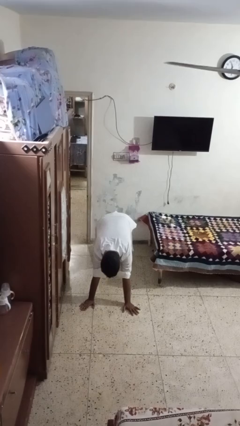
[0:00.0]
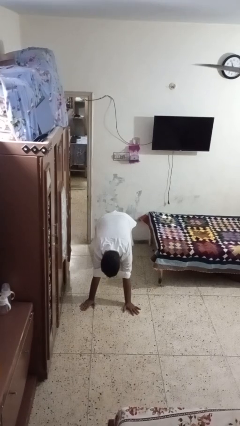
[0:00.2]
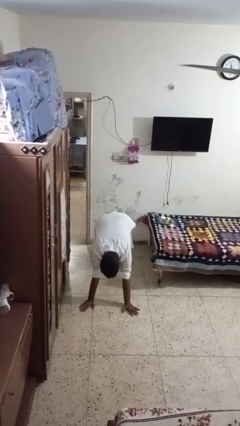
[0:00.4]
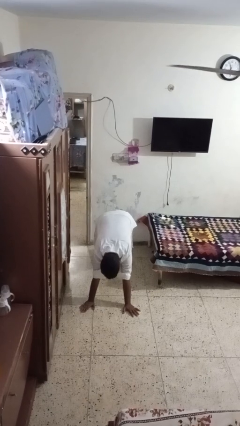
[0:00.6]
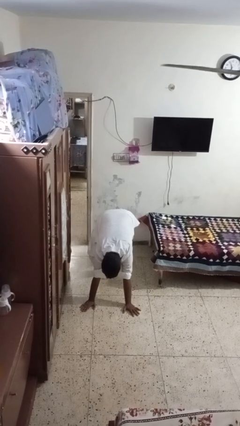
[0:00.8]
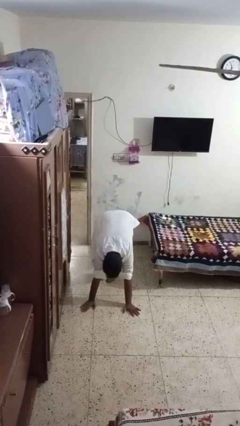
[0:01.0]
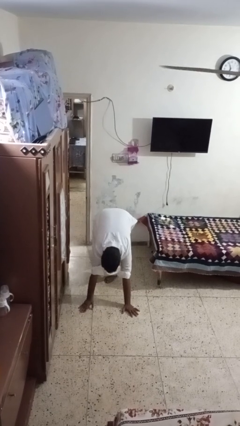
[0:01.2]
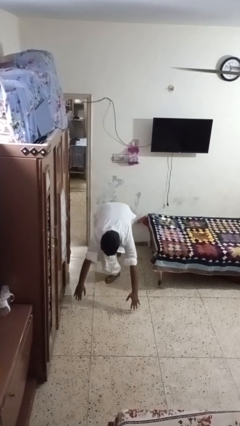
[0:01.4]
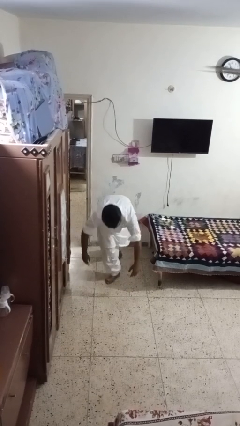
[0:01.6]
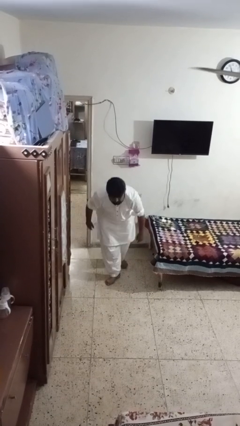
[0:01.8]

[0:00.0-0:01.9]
person stands up from floor

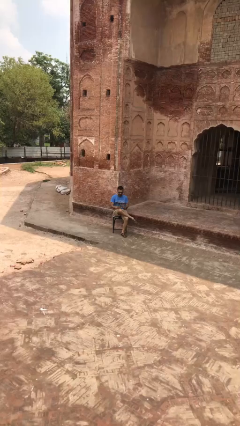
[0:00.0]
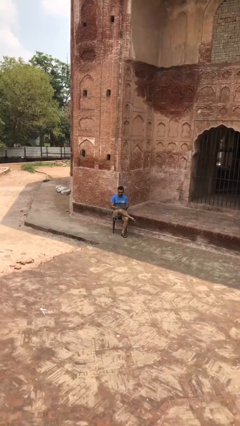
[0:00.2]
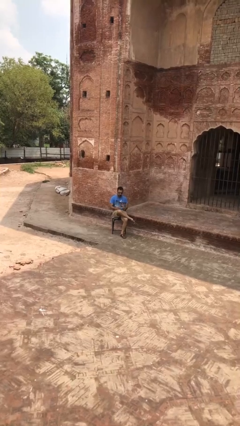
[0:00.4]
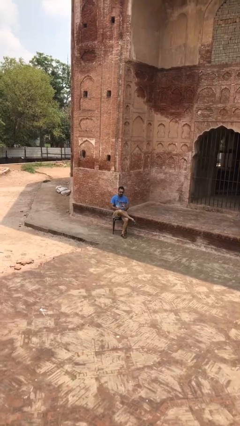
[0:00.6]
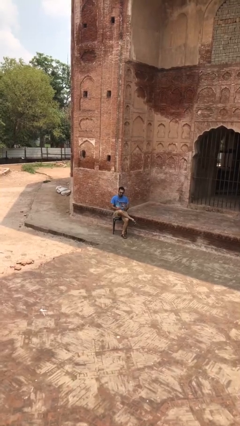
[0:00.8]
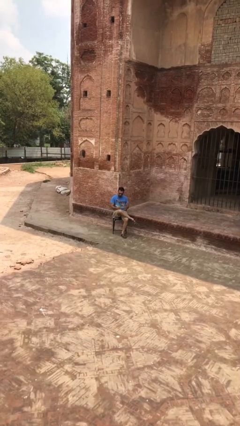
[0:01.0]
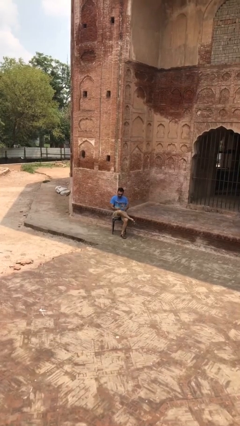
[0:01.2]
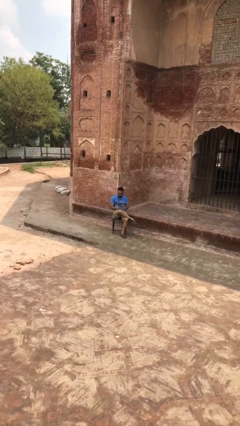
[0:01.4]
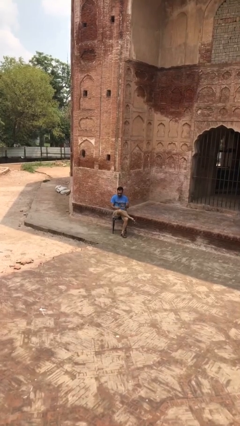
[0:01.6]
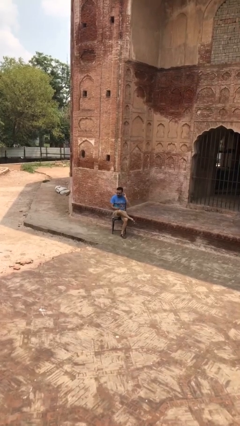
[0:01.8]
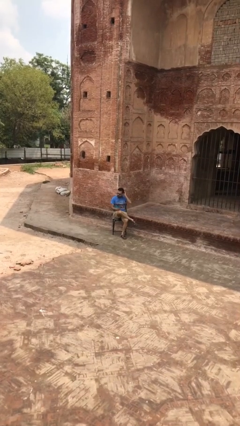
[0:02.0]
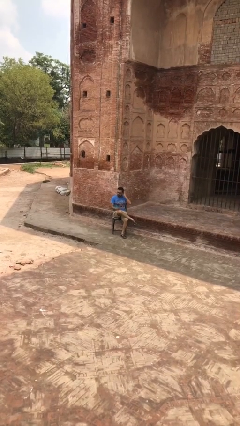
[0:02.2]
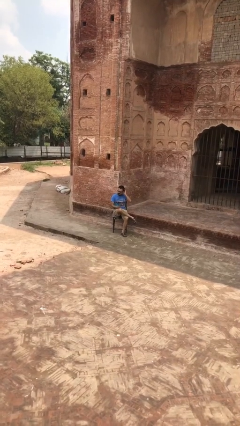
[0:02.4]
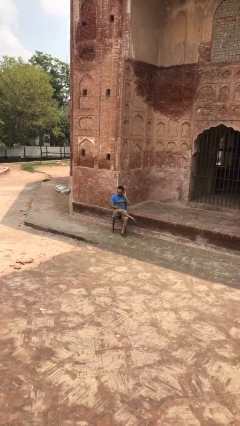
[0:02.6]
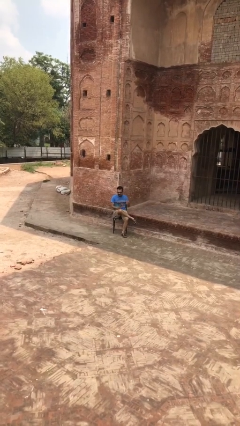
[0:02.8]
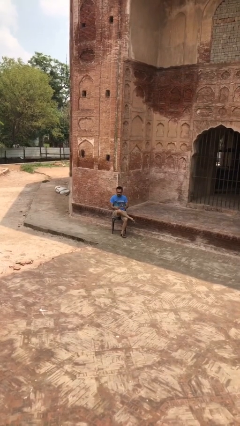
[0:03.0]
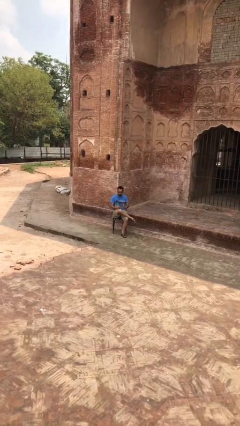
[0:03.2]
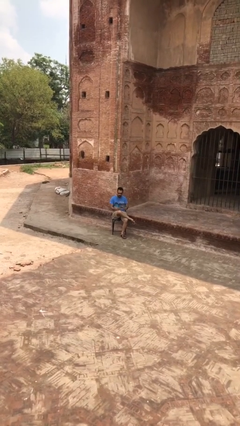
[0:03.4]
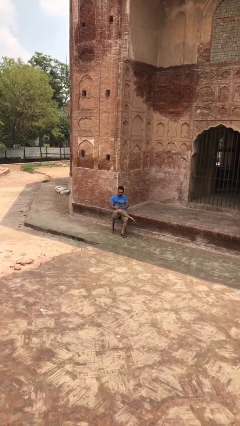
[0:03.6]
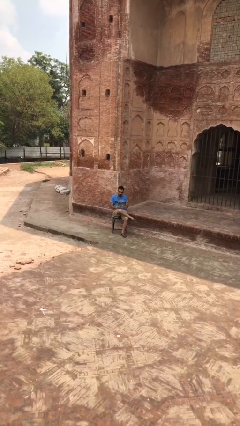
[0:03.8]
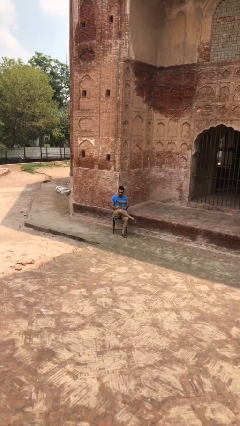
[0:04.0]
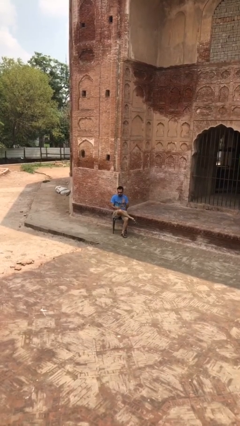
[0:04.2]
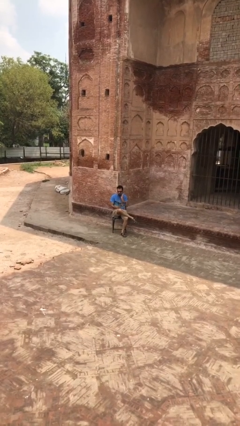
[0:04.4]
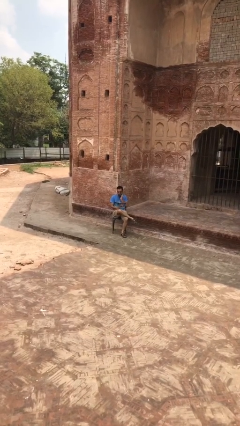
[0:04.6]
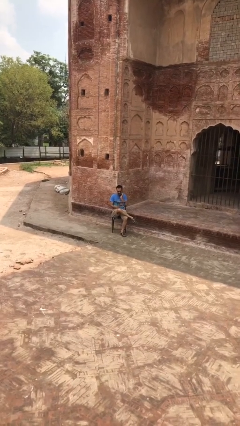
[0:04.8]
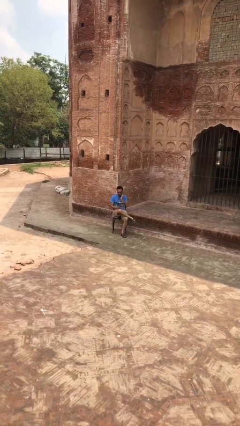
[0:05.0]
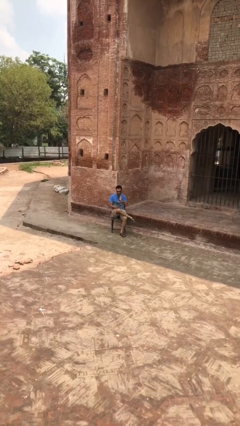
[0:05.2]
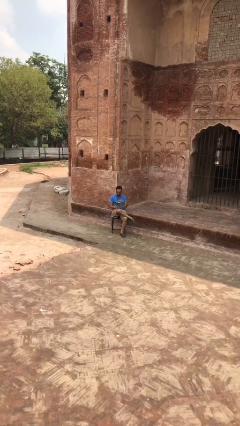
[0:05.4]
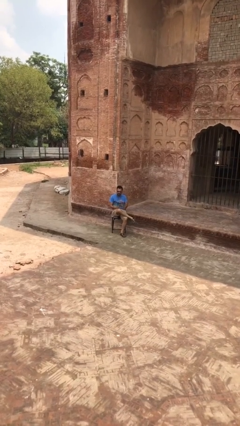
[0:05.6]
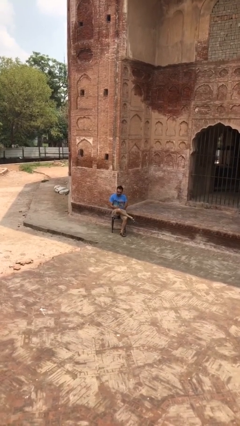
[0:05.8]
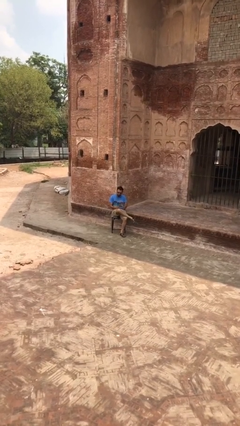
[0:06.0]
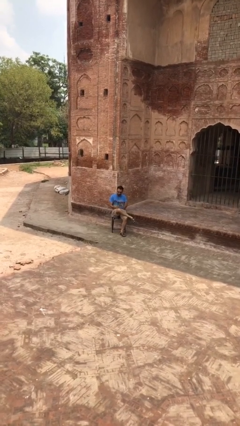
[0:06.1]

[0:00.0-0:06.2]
person reads document

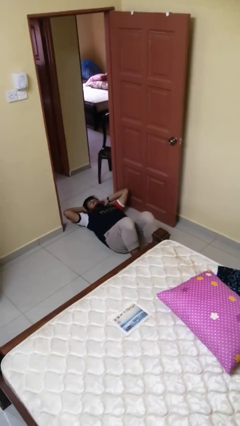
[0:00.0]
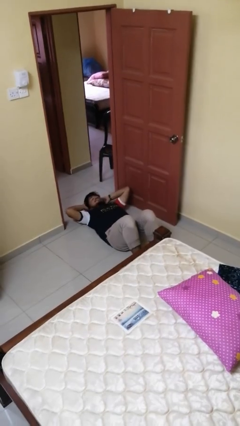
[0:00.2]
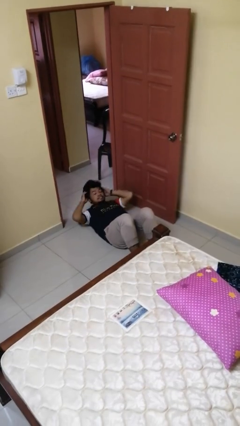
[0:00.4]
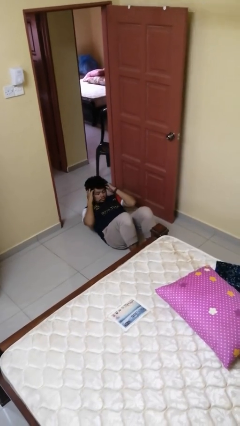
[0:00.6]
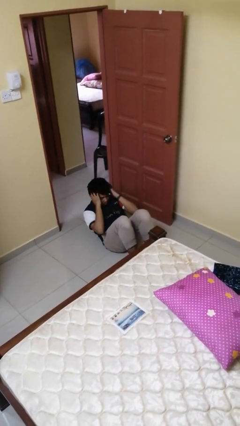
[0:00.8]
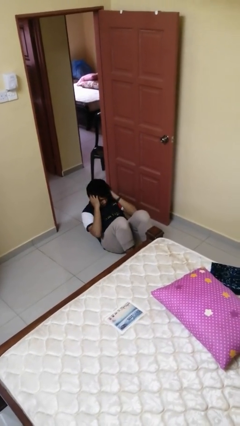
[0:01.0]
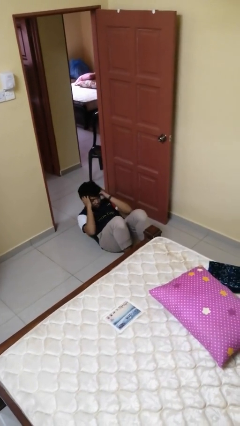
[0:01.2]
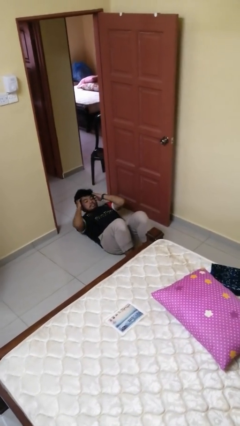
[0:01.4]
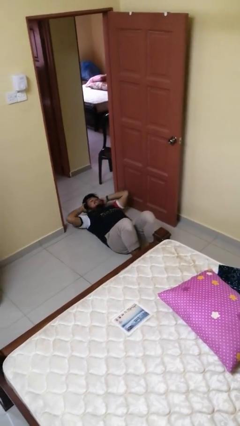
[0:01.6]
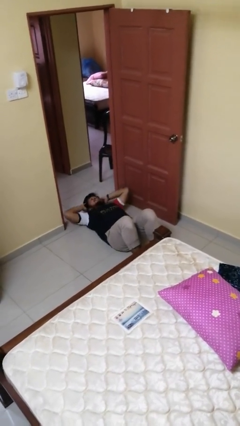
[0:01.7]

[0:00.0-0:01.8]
person exercises with situp

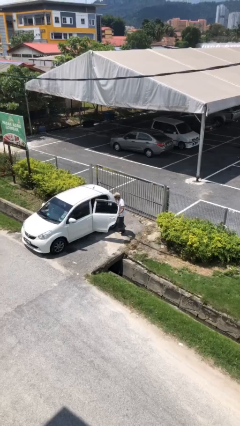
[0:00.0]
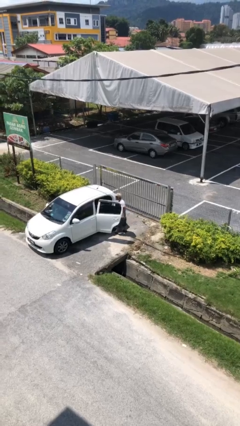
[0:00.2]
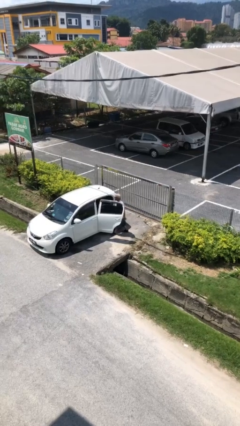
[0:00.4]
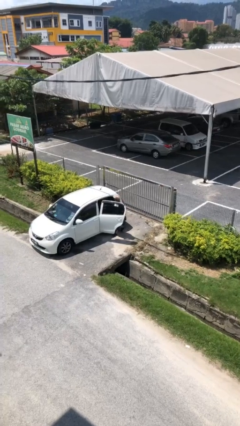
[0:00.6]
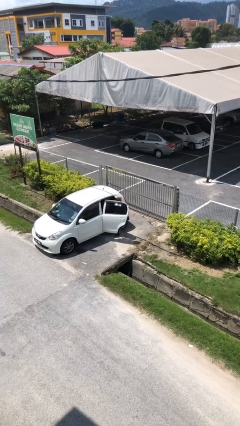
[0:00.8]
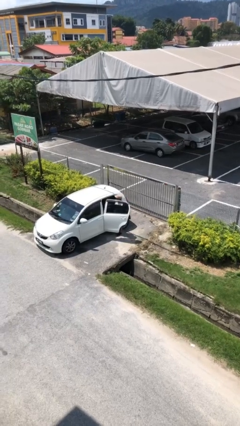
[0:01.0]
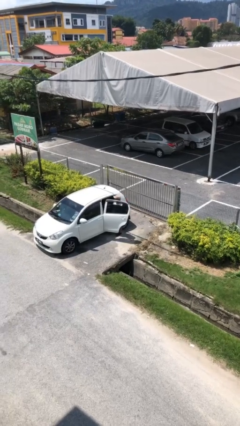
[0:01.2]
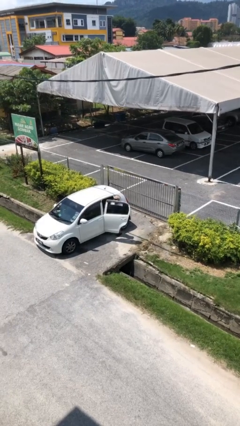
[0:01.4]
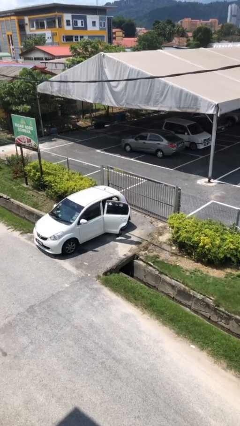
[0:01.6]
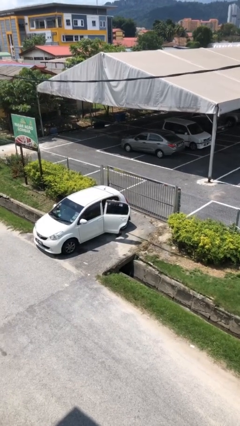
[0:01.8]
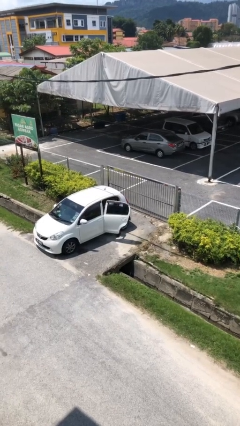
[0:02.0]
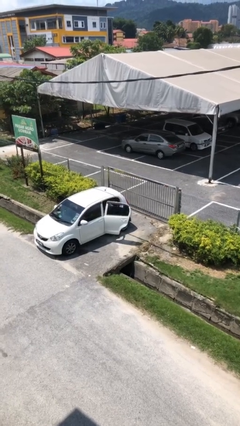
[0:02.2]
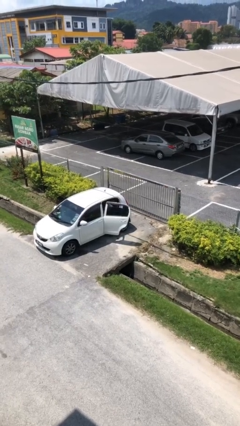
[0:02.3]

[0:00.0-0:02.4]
person enters car

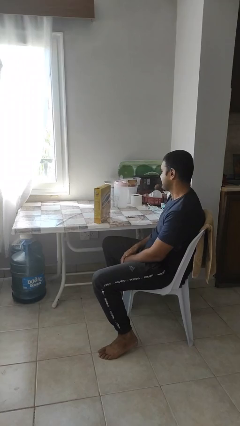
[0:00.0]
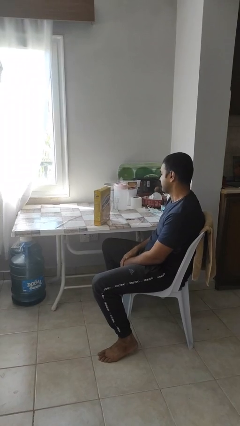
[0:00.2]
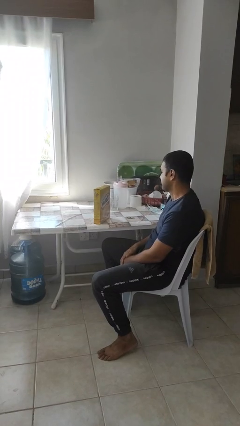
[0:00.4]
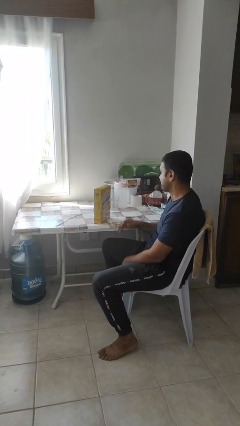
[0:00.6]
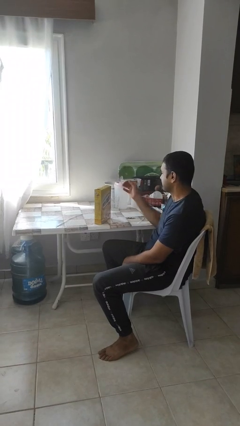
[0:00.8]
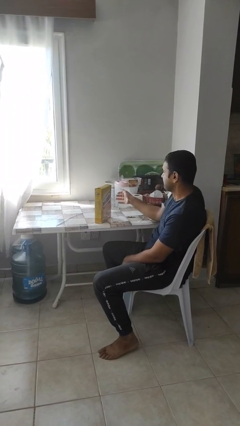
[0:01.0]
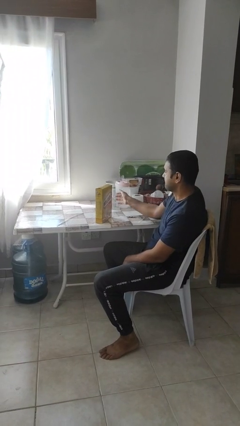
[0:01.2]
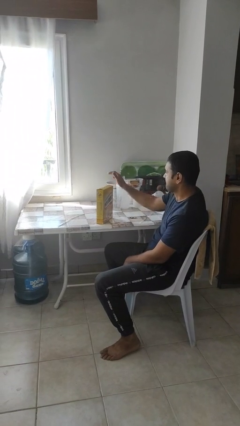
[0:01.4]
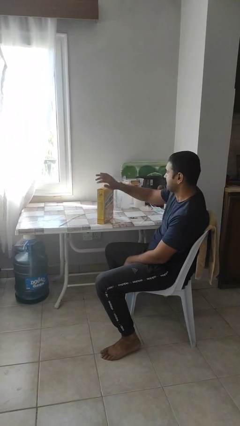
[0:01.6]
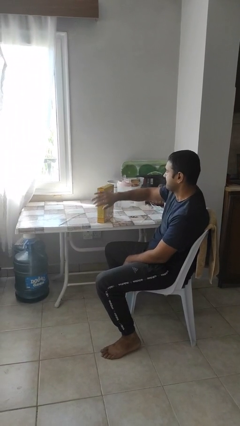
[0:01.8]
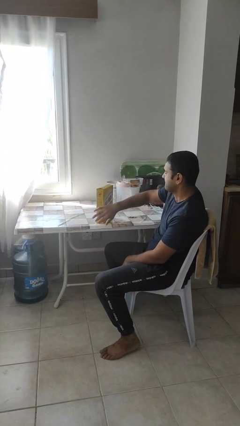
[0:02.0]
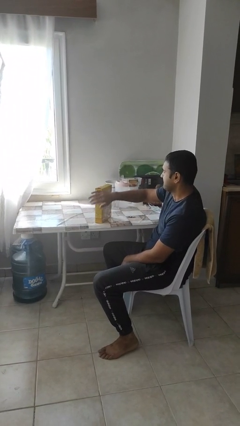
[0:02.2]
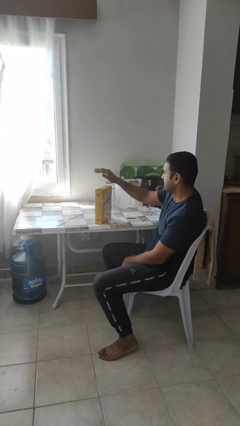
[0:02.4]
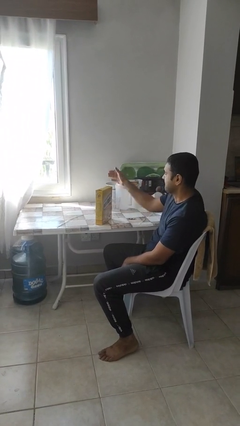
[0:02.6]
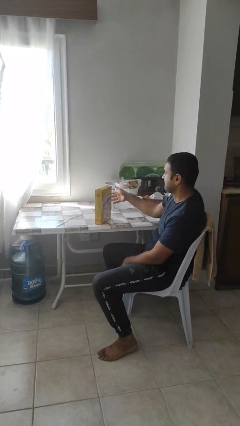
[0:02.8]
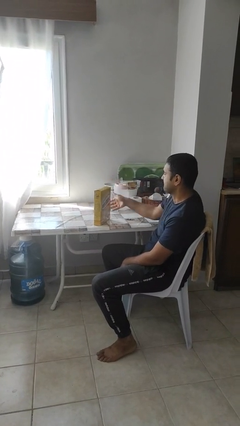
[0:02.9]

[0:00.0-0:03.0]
person waves hand over object

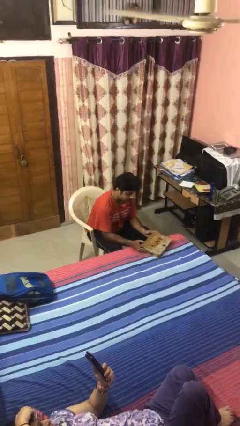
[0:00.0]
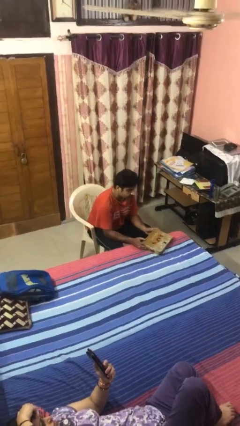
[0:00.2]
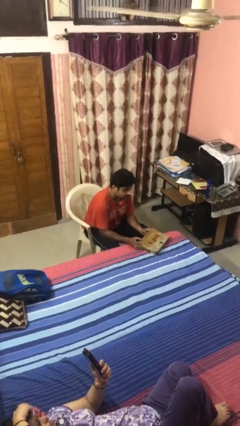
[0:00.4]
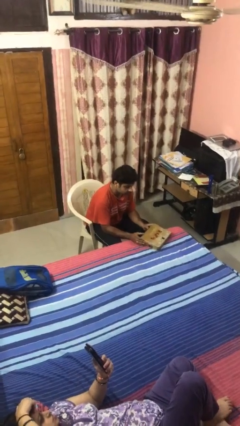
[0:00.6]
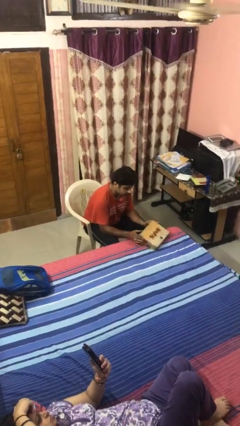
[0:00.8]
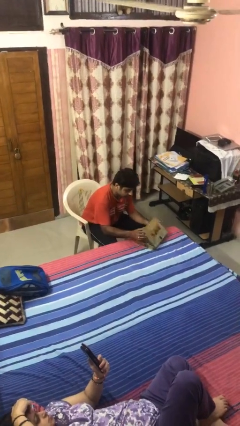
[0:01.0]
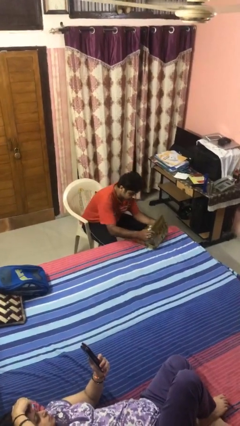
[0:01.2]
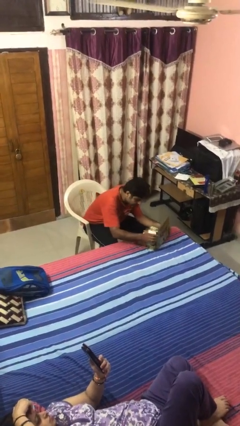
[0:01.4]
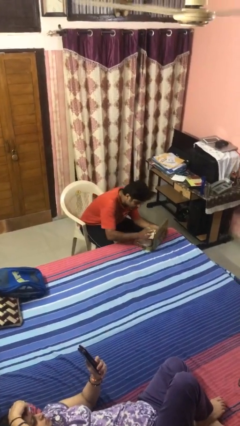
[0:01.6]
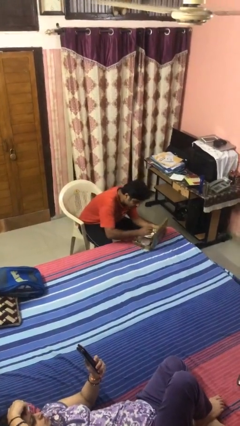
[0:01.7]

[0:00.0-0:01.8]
person opens jewelry box
